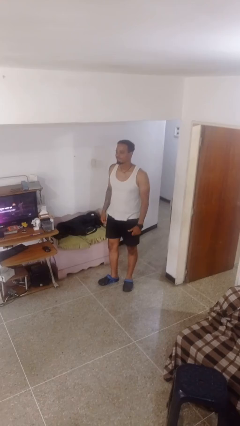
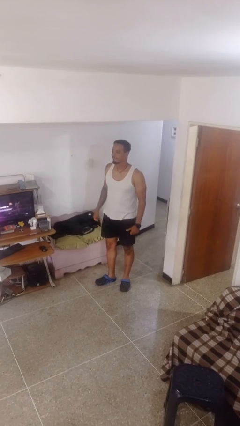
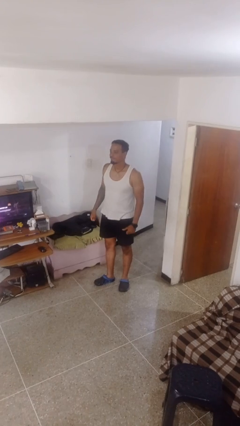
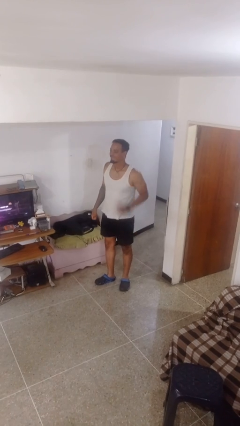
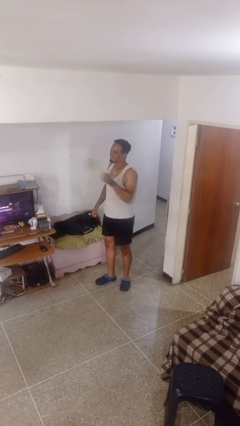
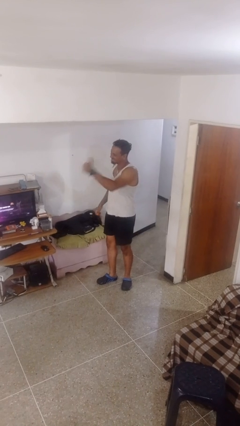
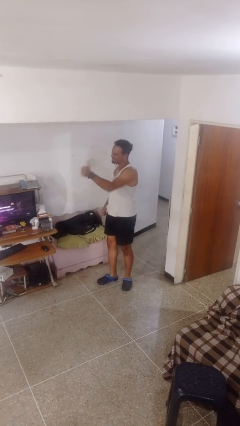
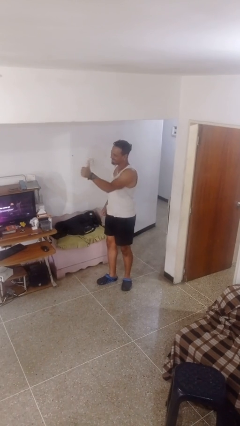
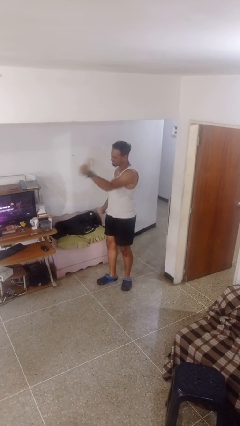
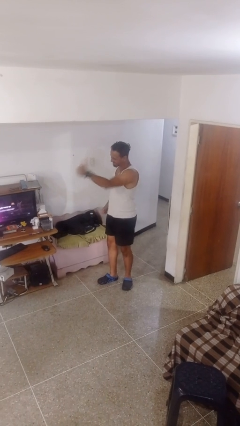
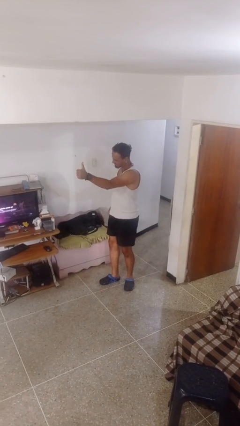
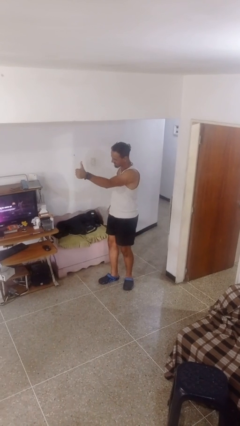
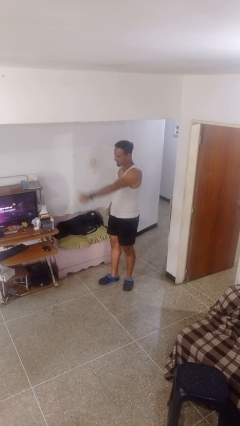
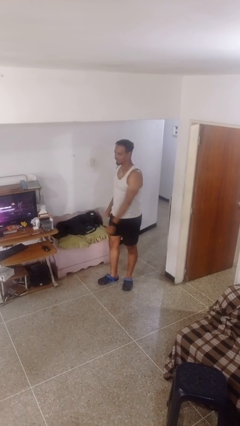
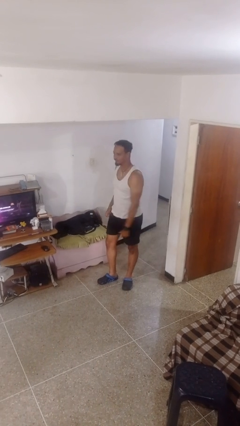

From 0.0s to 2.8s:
person gestures thumbs up

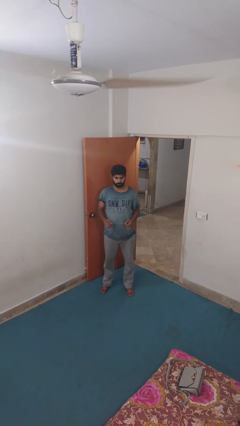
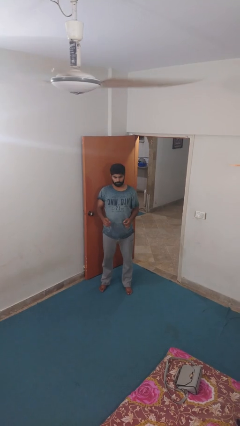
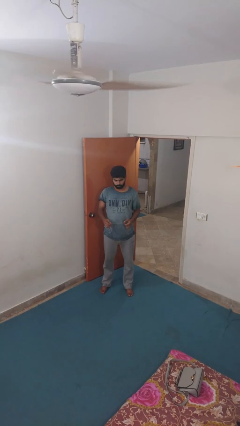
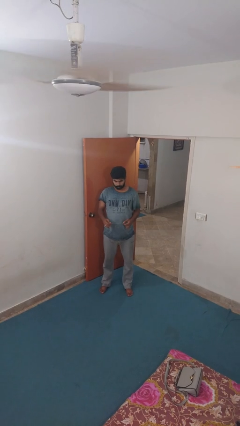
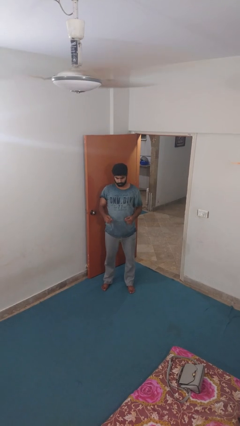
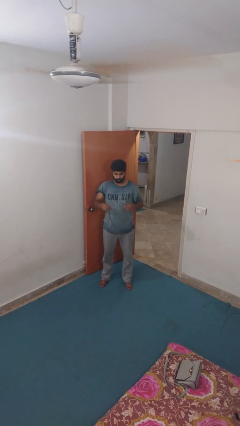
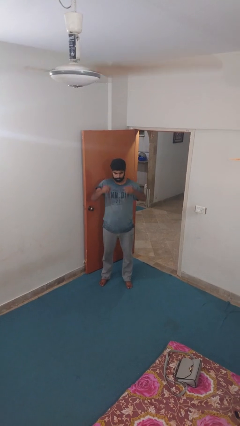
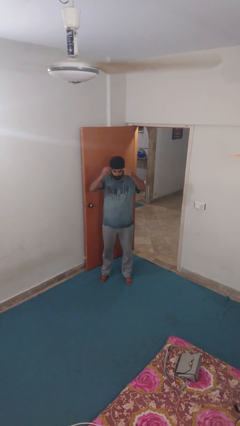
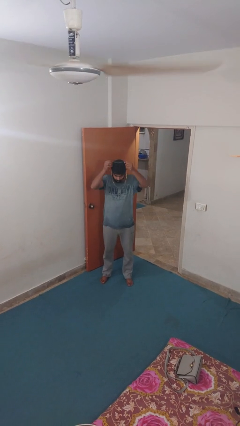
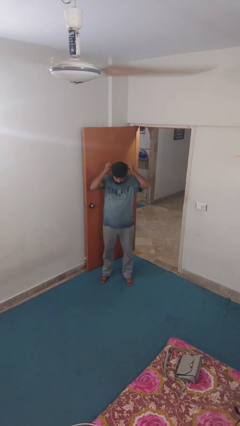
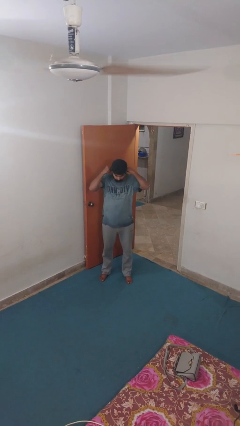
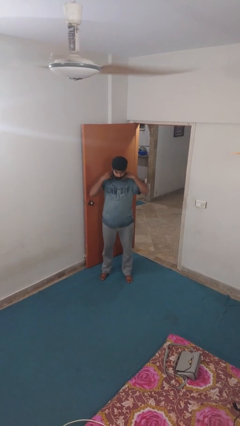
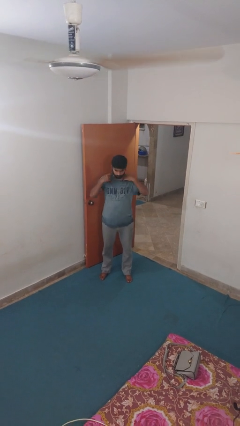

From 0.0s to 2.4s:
person puts on necklace

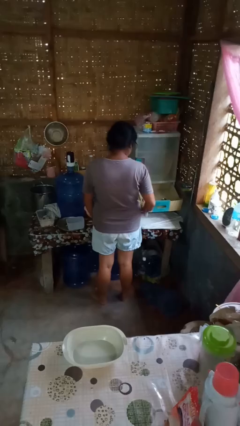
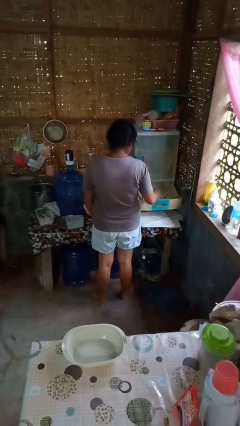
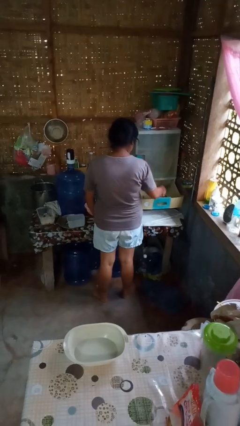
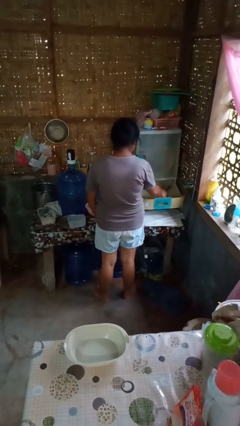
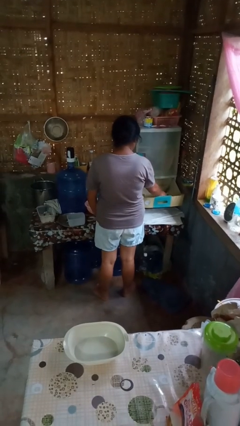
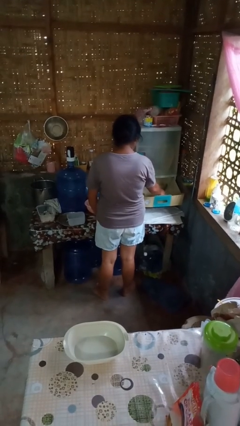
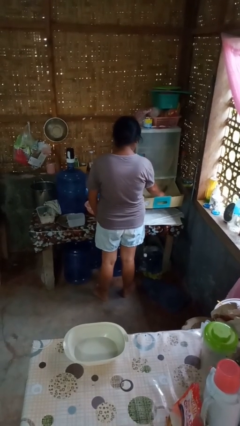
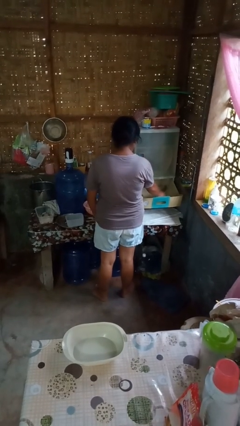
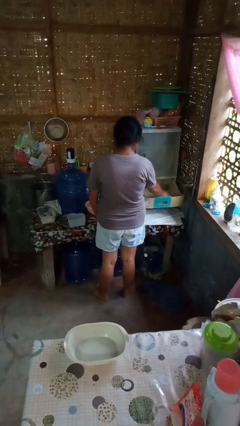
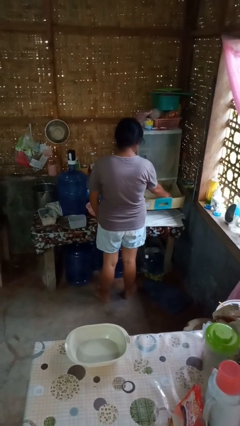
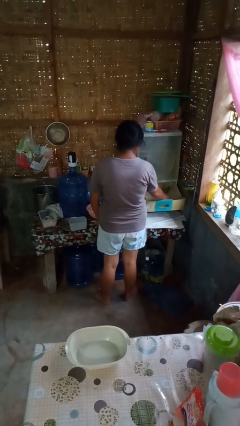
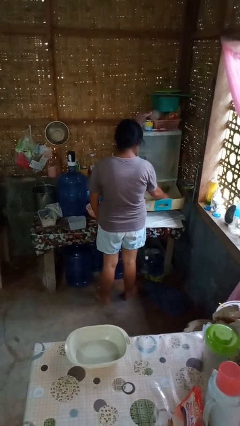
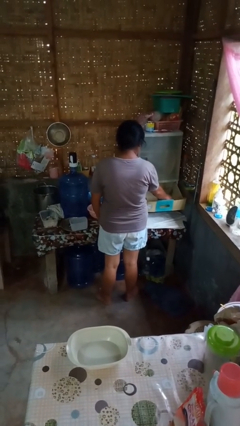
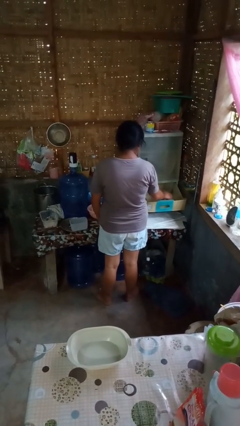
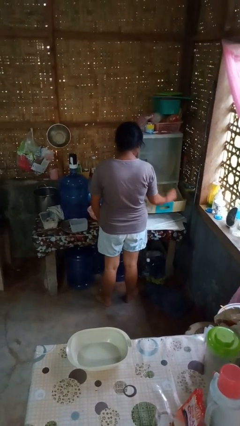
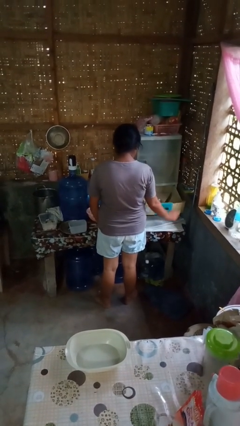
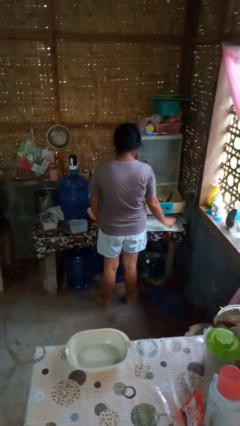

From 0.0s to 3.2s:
person puts object into kitchen drawer

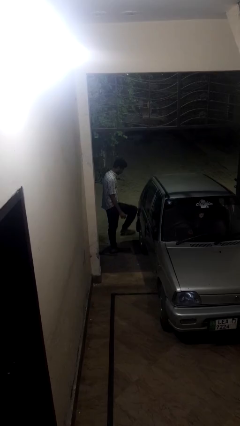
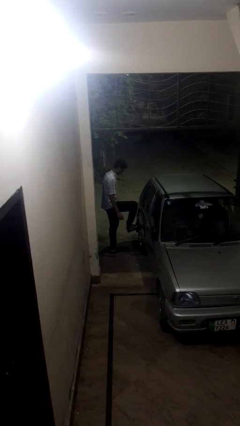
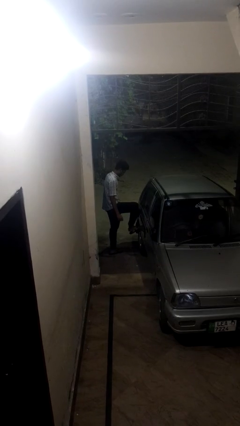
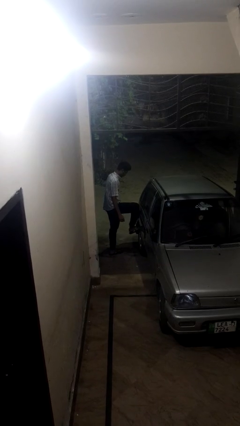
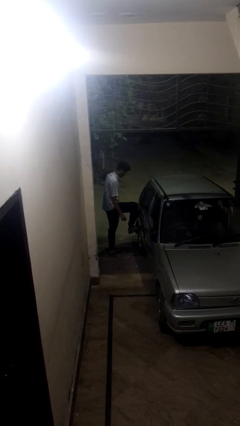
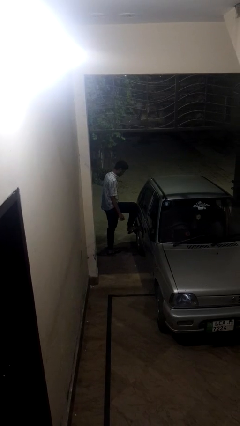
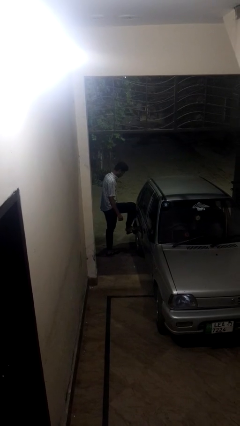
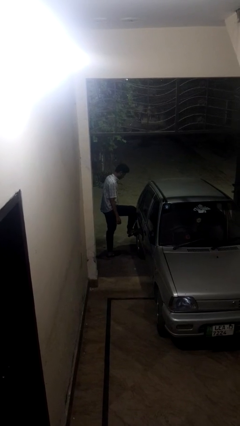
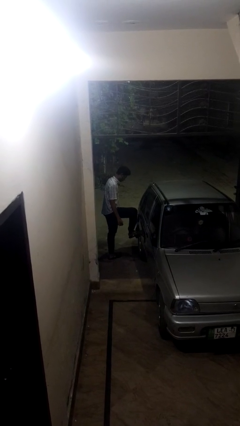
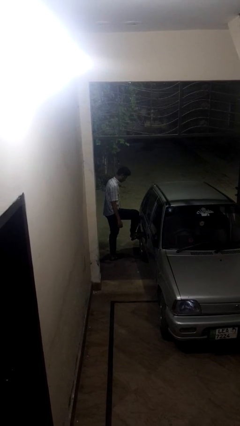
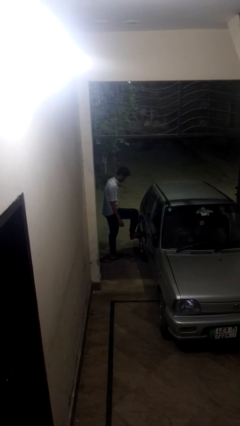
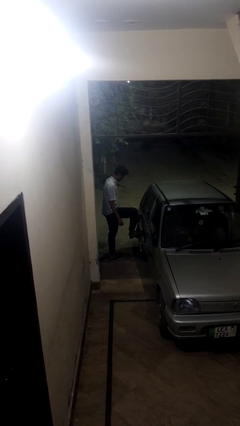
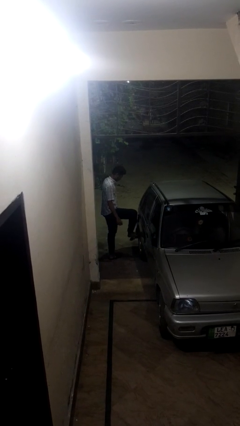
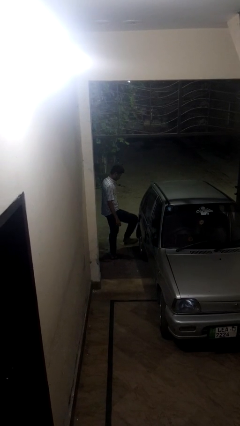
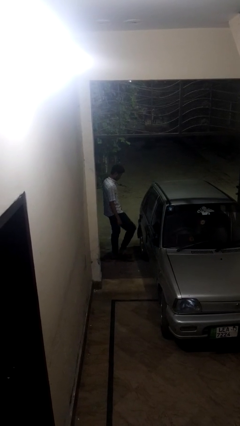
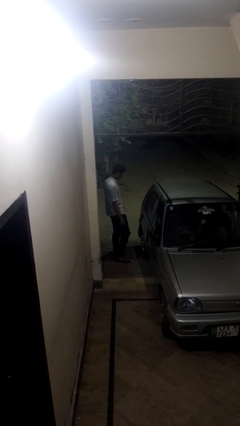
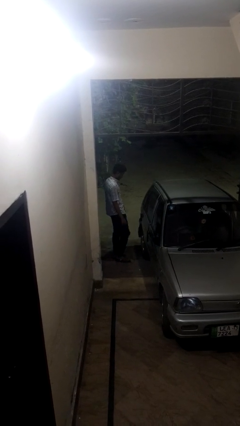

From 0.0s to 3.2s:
person kicks car tires

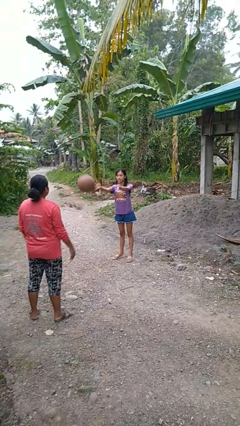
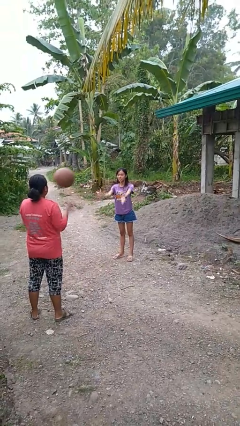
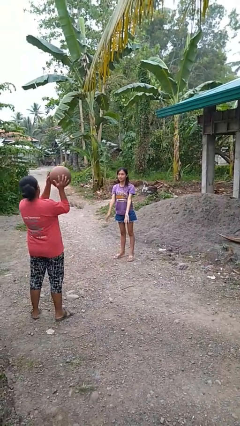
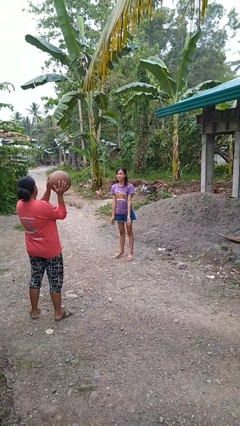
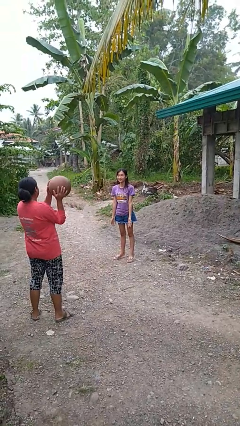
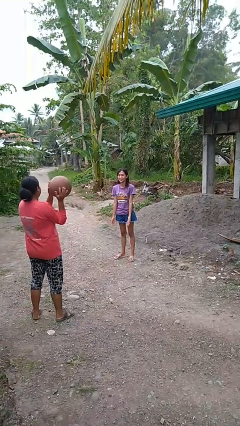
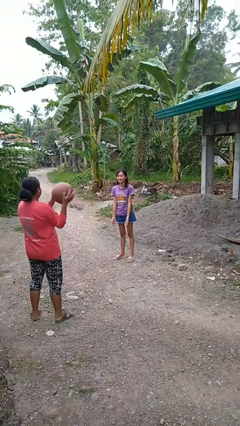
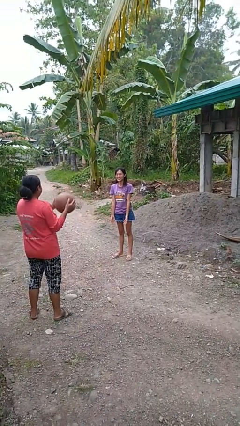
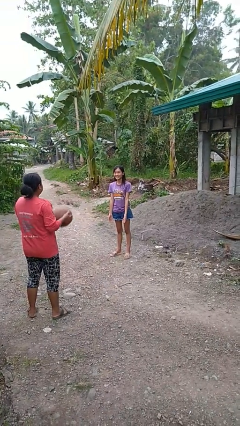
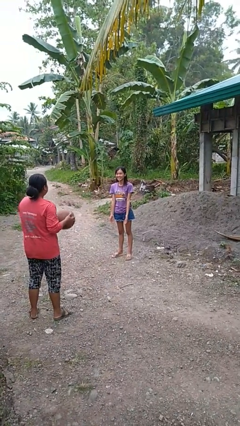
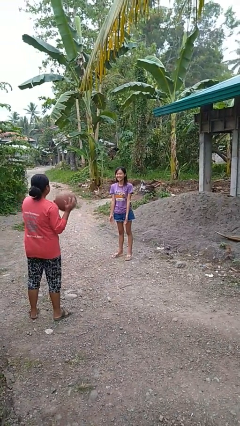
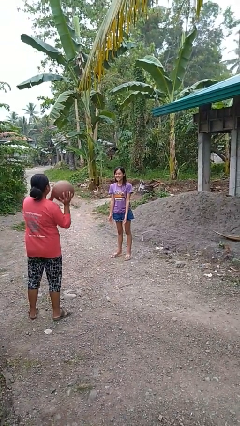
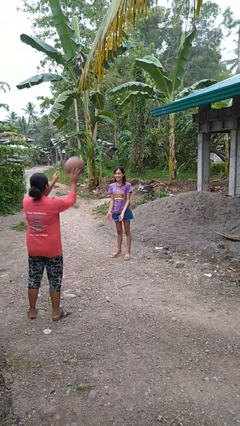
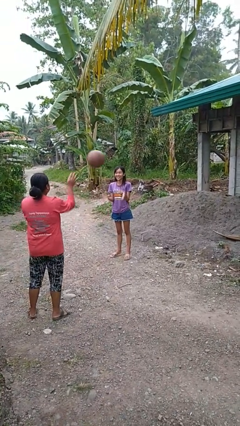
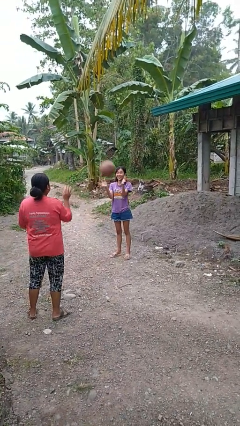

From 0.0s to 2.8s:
person throws object to person

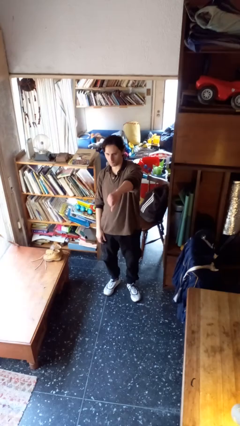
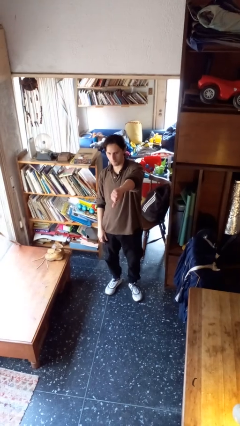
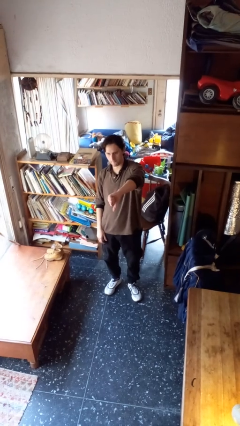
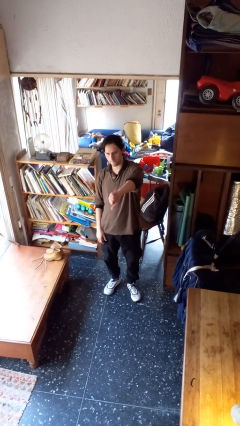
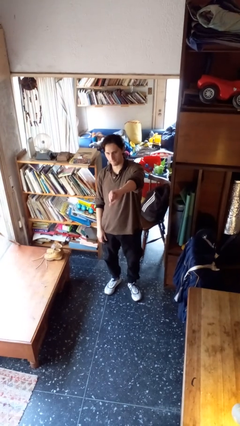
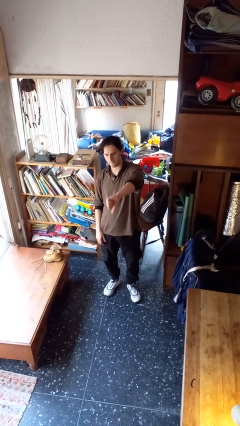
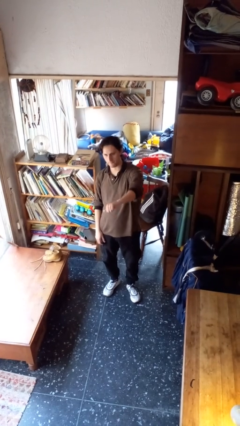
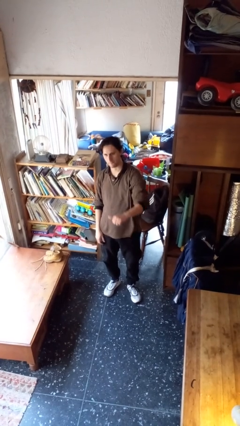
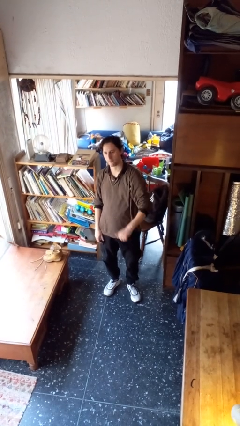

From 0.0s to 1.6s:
person gestures thumbs down

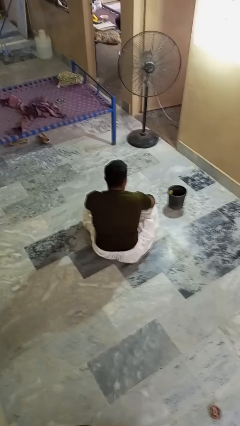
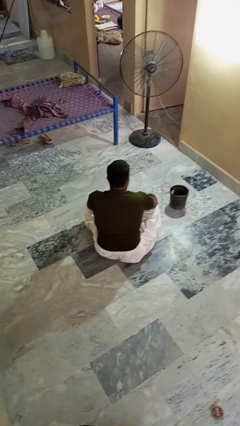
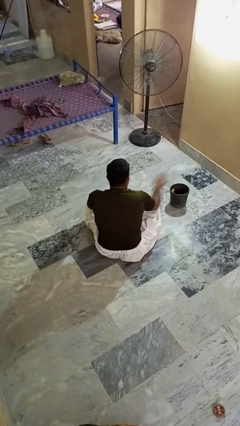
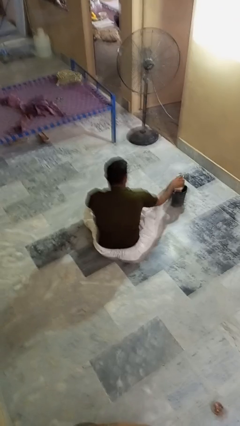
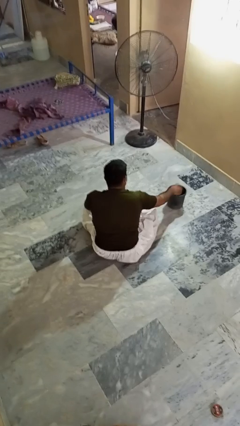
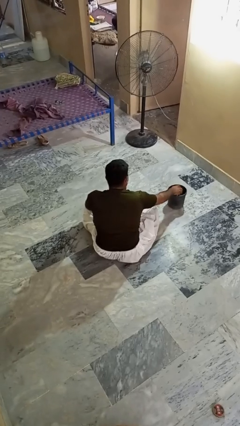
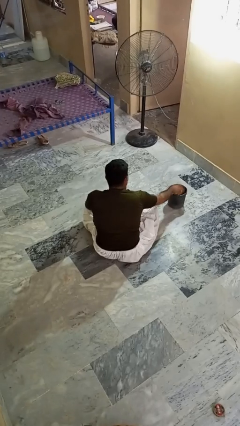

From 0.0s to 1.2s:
person puts object into basket
